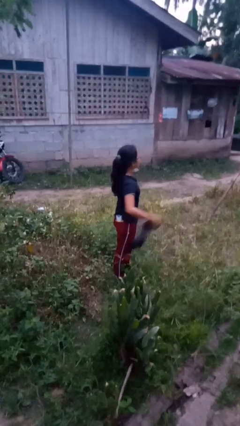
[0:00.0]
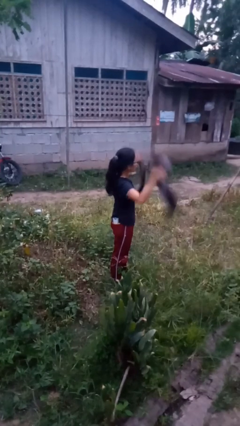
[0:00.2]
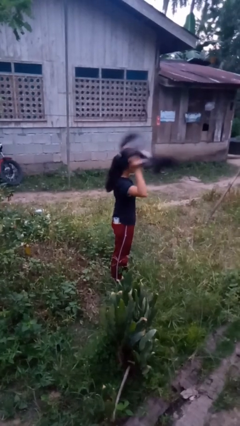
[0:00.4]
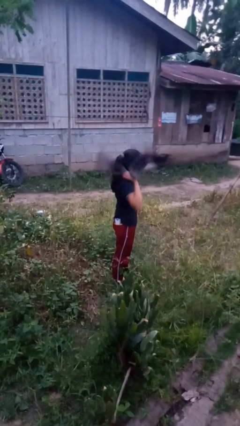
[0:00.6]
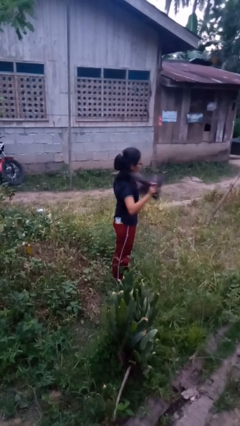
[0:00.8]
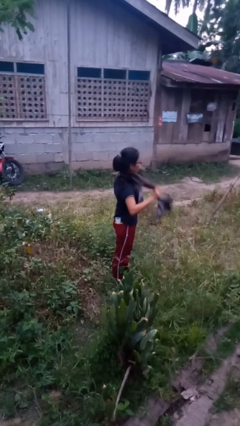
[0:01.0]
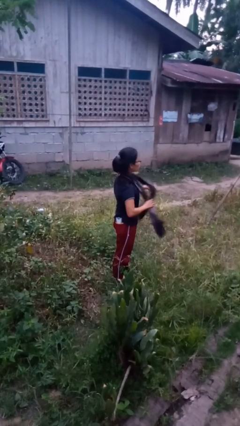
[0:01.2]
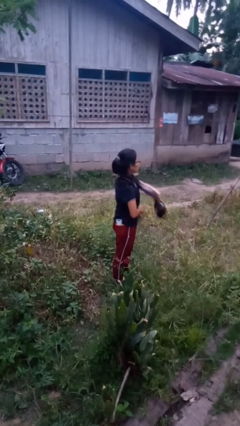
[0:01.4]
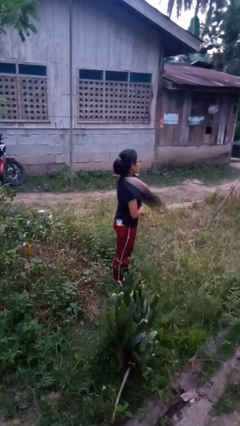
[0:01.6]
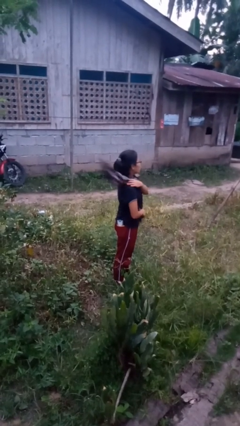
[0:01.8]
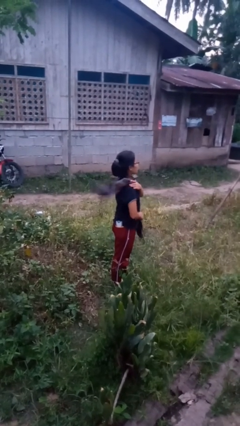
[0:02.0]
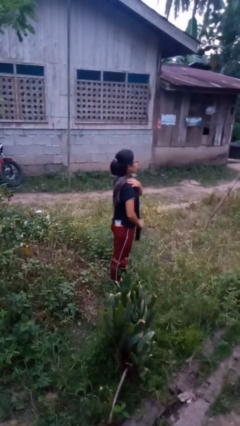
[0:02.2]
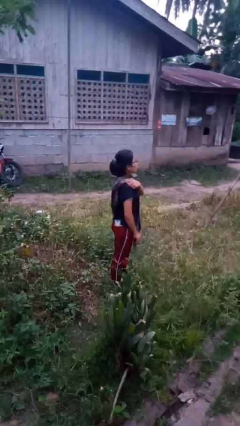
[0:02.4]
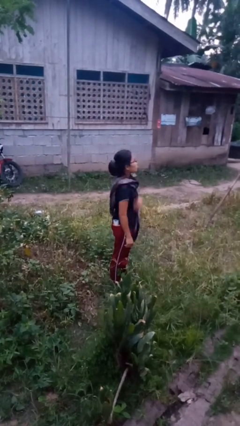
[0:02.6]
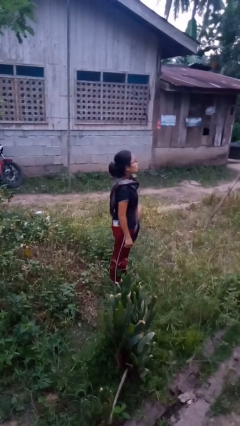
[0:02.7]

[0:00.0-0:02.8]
person puts on scarf

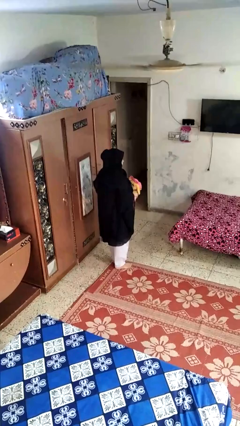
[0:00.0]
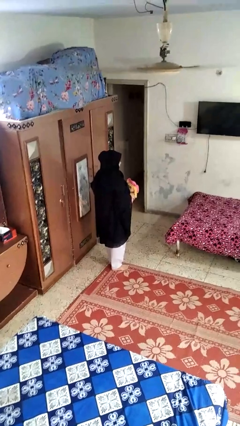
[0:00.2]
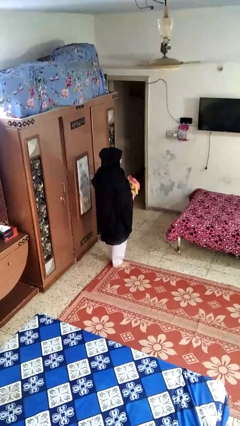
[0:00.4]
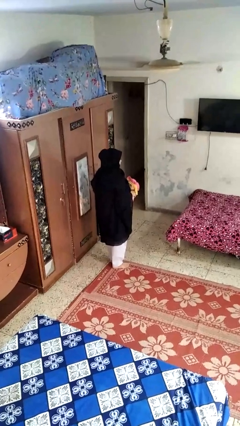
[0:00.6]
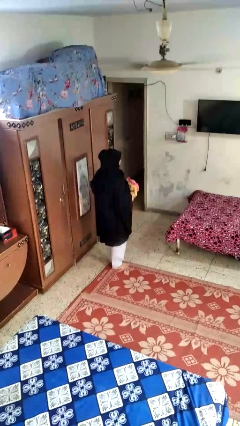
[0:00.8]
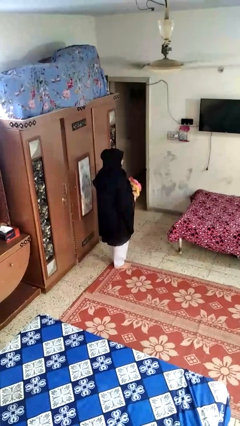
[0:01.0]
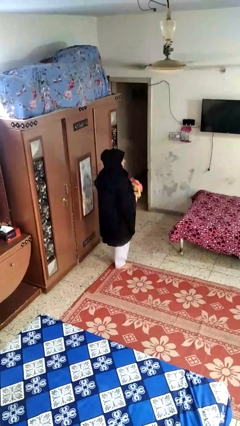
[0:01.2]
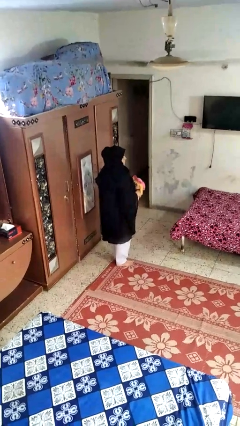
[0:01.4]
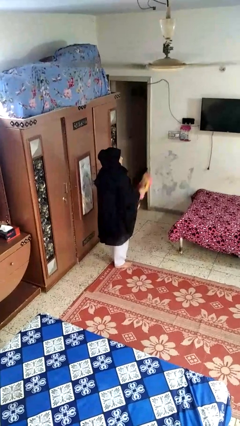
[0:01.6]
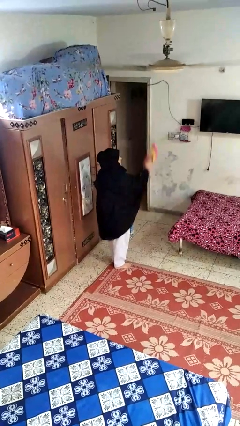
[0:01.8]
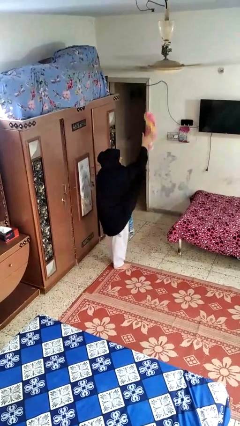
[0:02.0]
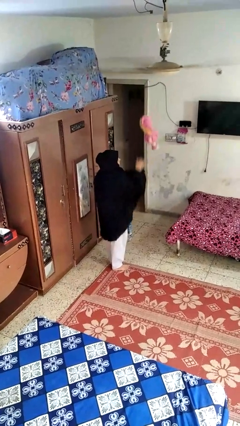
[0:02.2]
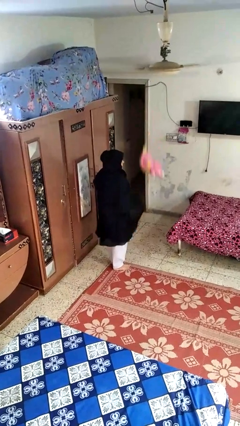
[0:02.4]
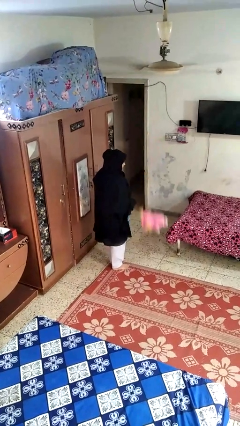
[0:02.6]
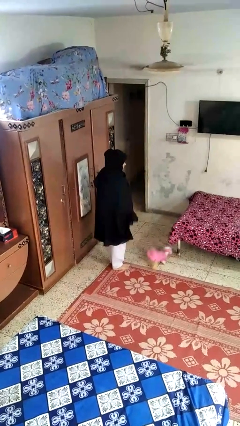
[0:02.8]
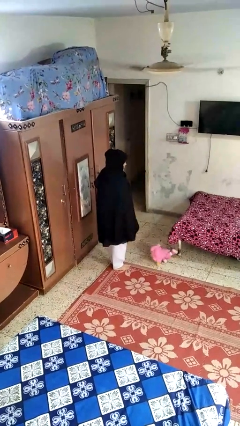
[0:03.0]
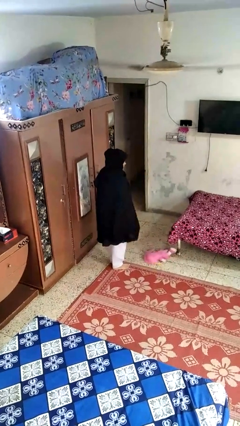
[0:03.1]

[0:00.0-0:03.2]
person throws object into air

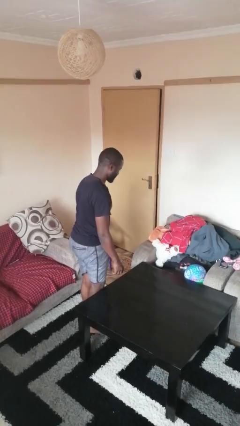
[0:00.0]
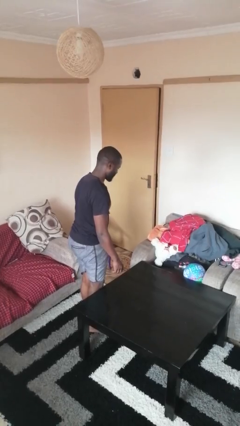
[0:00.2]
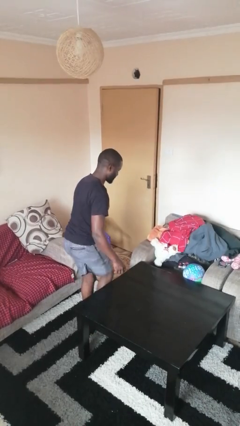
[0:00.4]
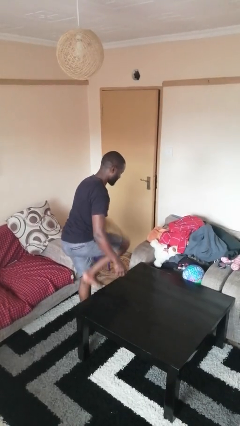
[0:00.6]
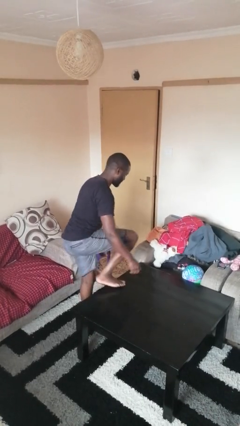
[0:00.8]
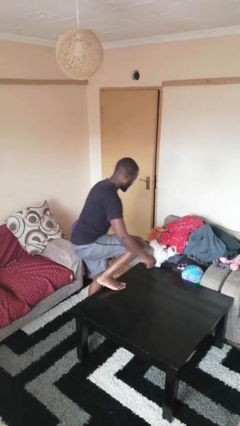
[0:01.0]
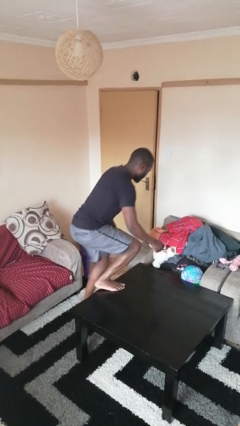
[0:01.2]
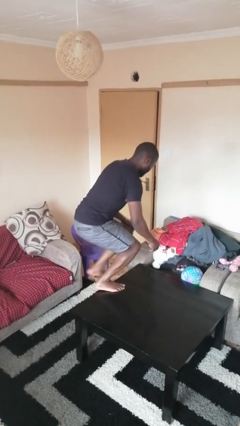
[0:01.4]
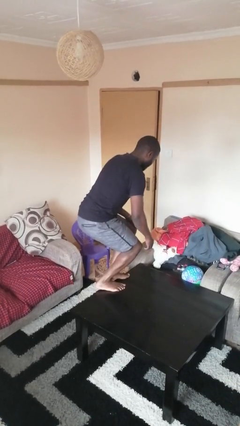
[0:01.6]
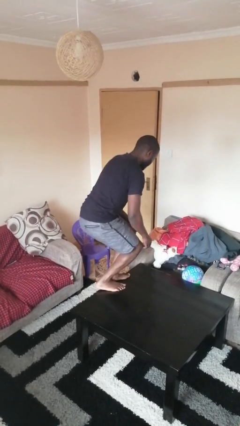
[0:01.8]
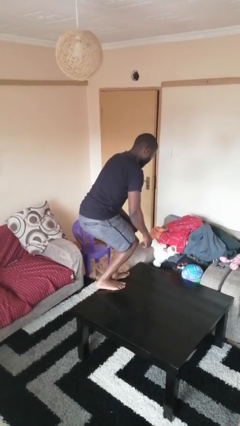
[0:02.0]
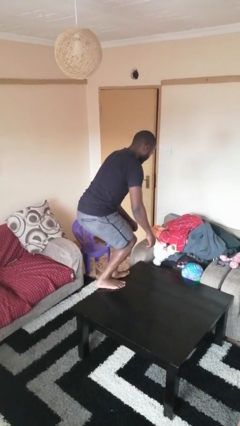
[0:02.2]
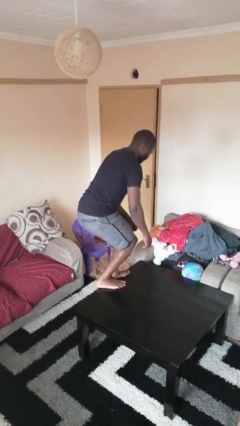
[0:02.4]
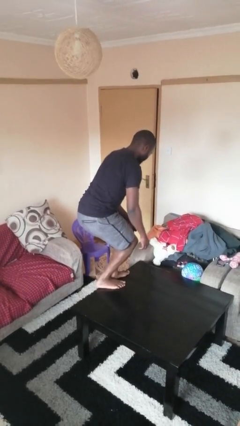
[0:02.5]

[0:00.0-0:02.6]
person climbs on table

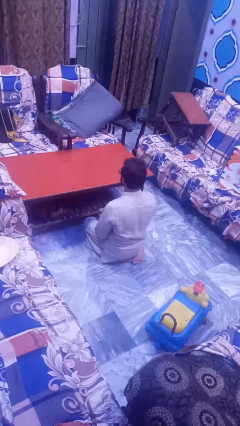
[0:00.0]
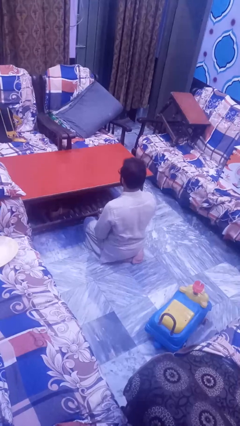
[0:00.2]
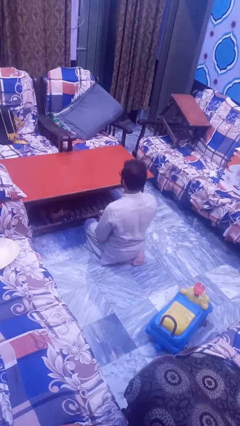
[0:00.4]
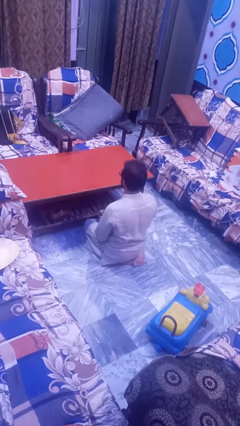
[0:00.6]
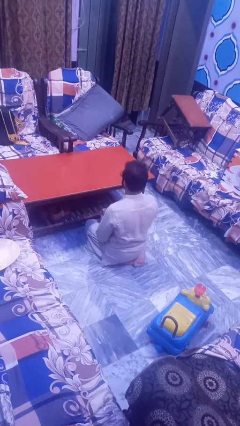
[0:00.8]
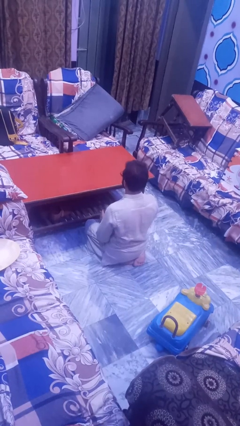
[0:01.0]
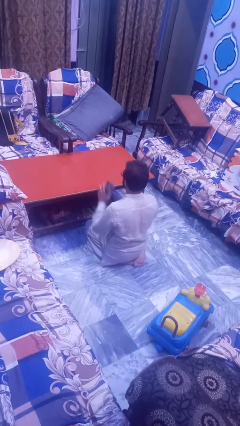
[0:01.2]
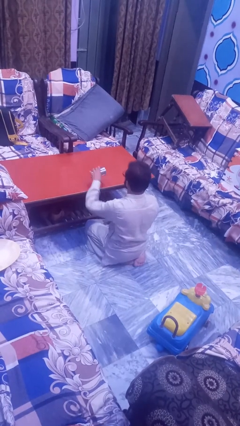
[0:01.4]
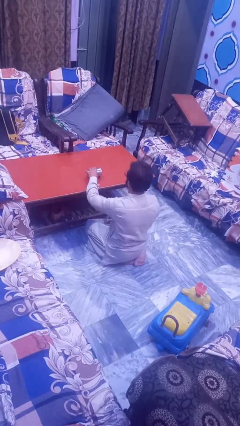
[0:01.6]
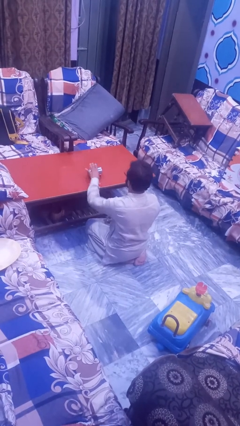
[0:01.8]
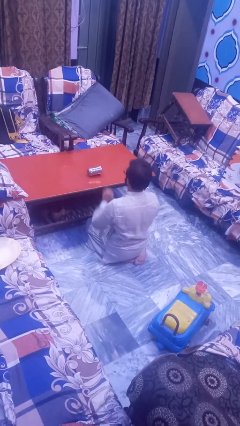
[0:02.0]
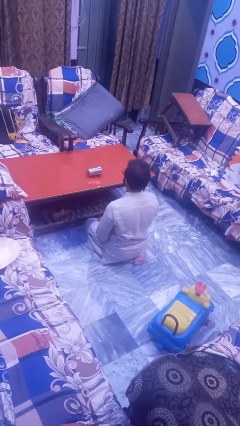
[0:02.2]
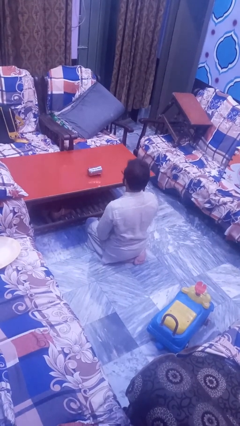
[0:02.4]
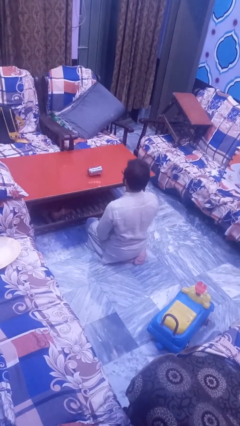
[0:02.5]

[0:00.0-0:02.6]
person knocks over glass

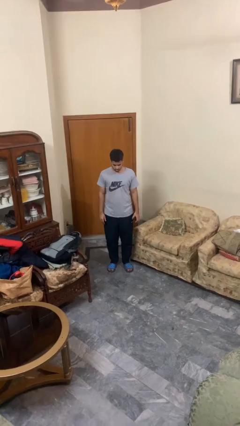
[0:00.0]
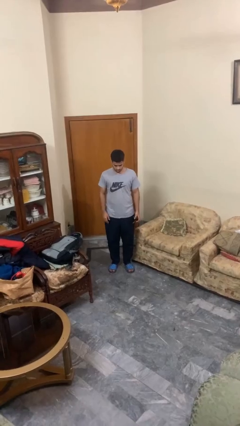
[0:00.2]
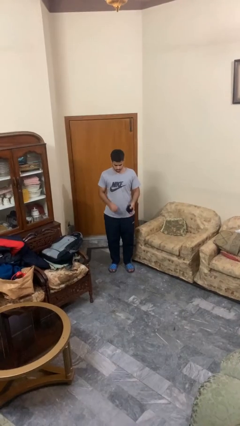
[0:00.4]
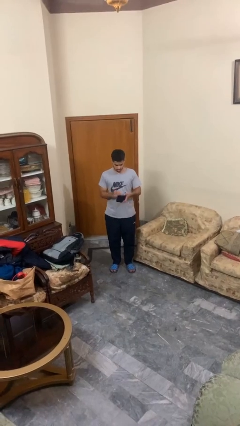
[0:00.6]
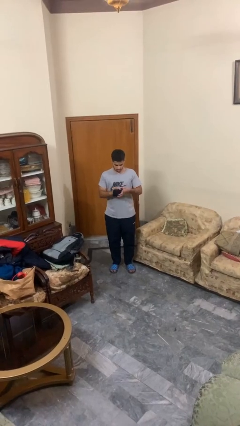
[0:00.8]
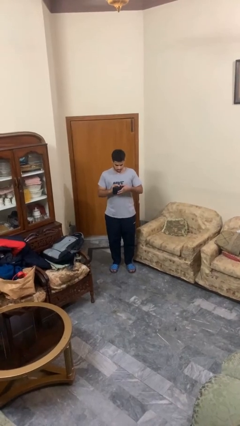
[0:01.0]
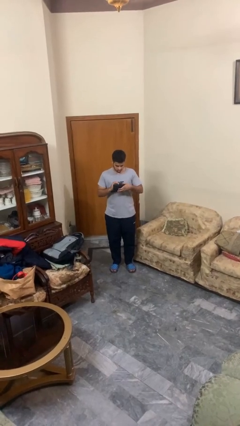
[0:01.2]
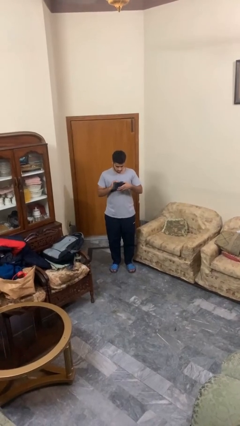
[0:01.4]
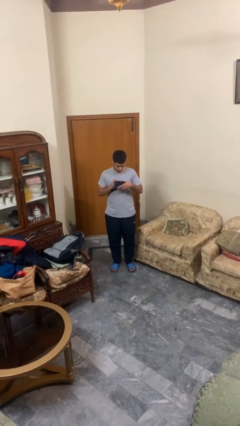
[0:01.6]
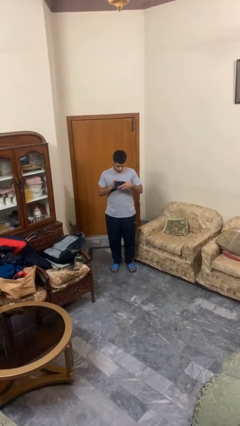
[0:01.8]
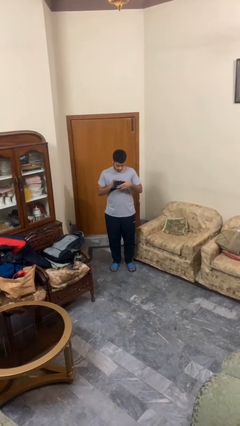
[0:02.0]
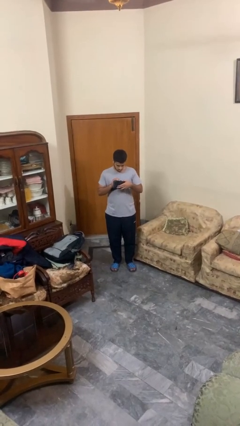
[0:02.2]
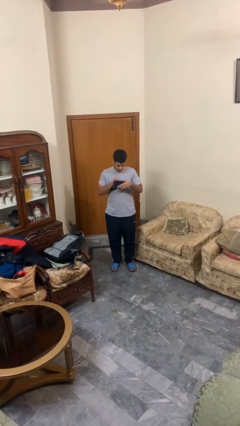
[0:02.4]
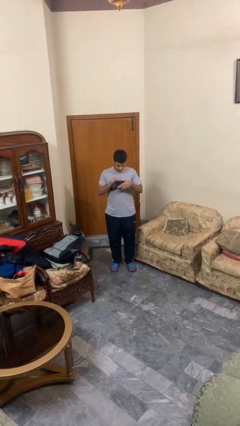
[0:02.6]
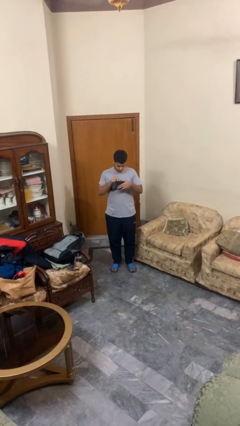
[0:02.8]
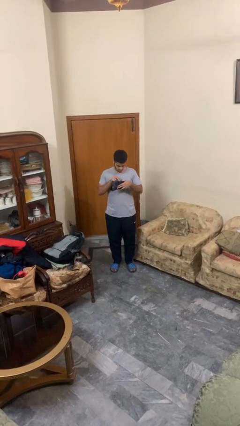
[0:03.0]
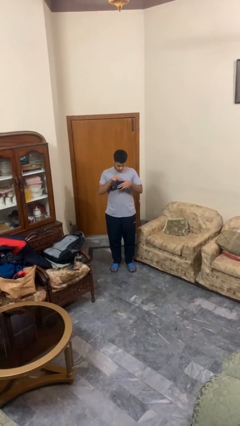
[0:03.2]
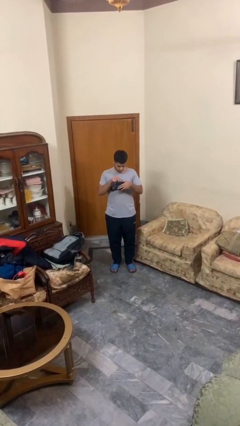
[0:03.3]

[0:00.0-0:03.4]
person searches in purse

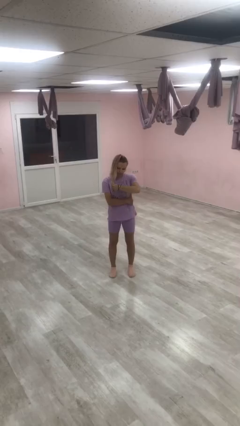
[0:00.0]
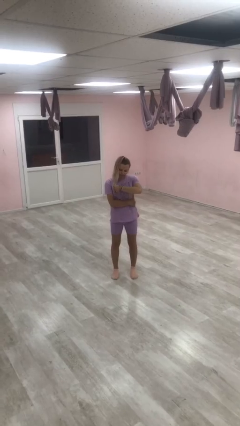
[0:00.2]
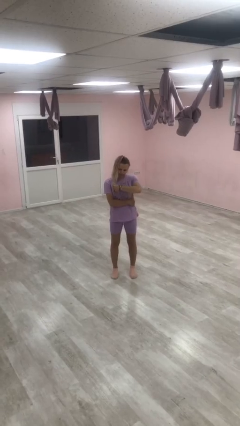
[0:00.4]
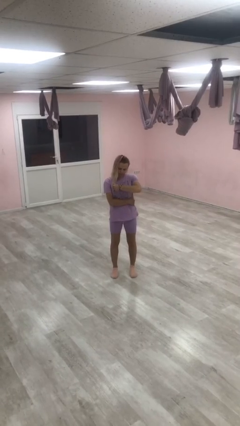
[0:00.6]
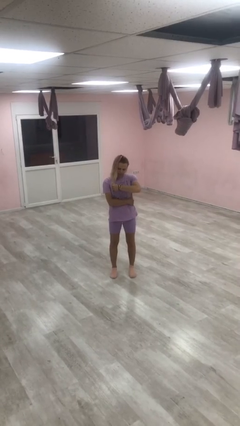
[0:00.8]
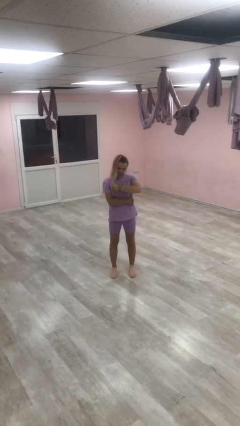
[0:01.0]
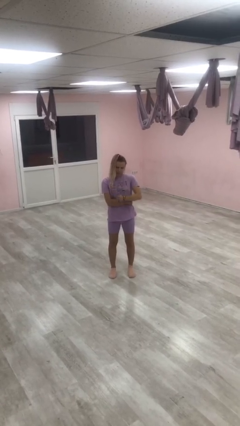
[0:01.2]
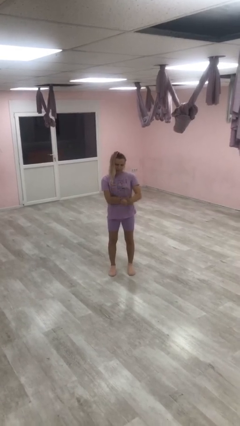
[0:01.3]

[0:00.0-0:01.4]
person looks at wristwatch

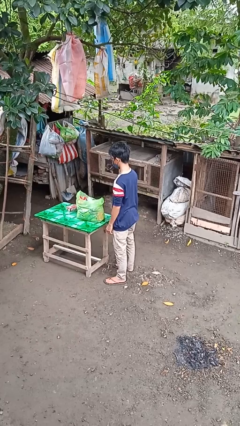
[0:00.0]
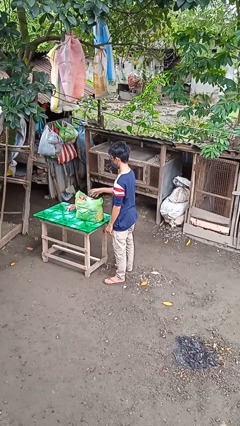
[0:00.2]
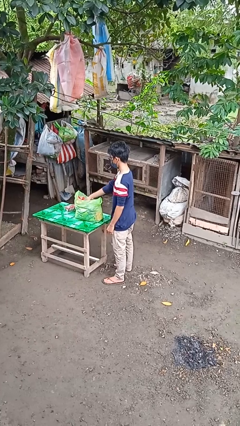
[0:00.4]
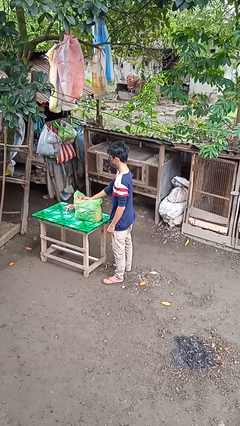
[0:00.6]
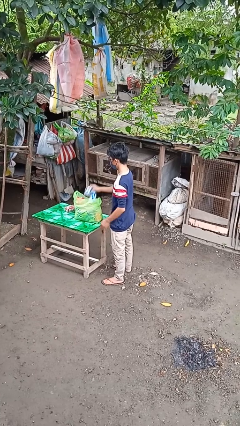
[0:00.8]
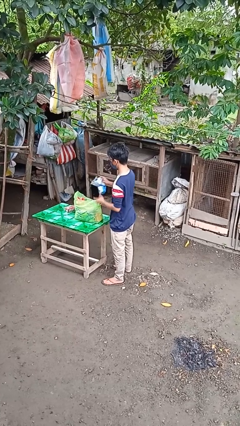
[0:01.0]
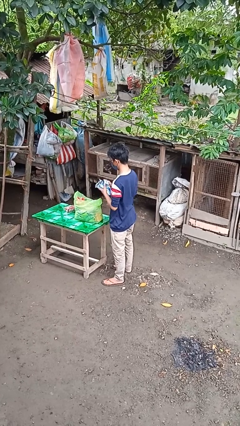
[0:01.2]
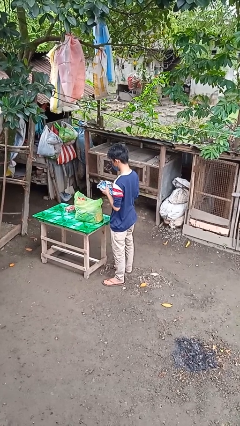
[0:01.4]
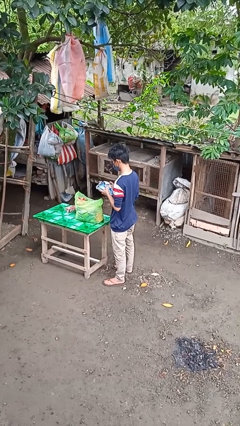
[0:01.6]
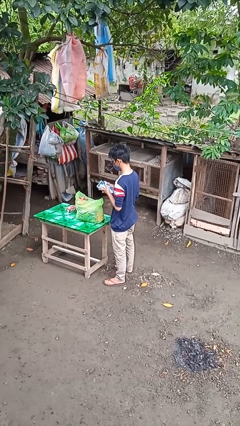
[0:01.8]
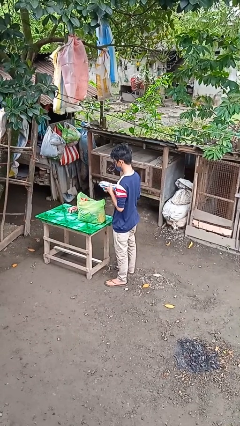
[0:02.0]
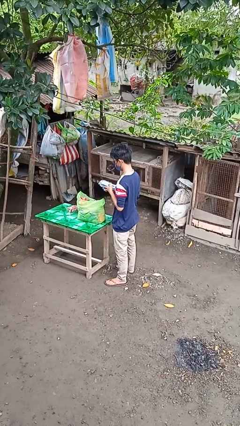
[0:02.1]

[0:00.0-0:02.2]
person takes object from bag
